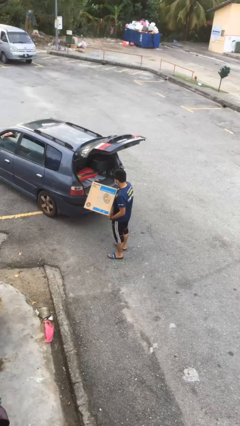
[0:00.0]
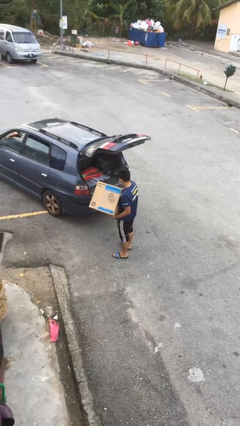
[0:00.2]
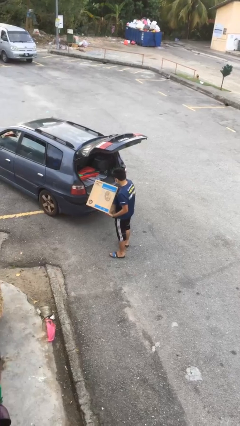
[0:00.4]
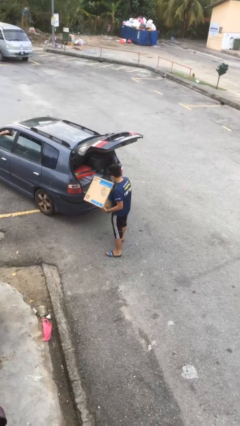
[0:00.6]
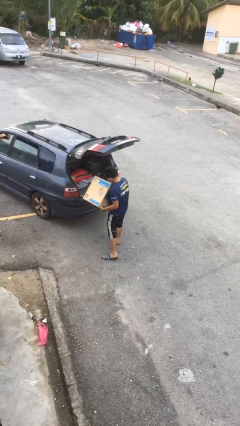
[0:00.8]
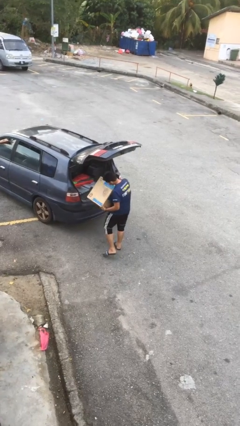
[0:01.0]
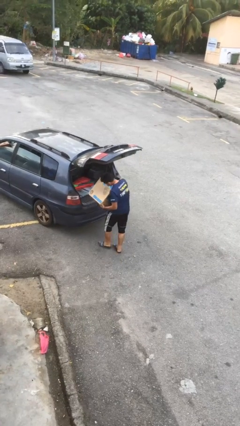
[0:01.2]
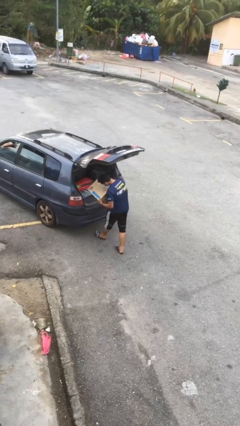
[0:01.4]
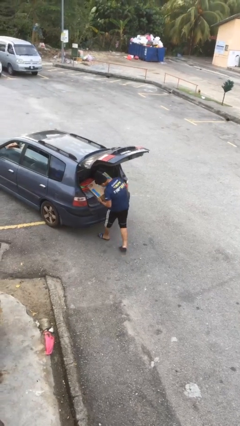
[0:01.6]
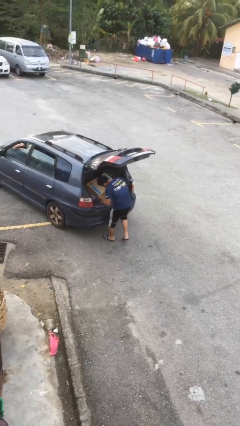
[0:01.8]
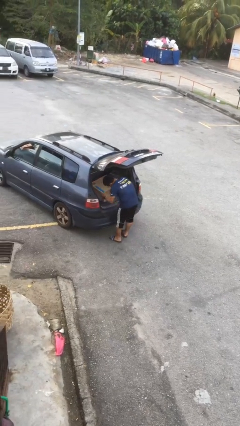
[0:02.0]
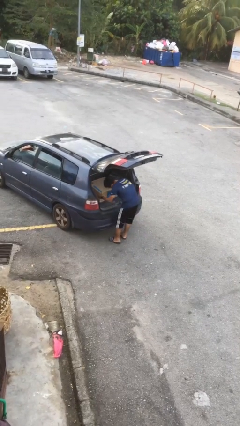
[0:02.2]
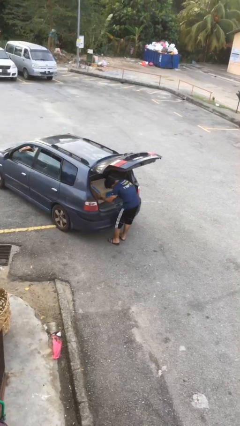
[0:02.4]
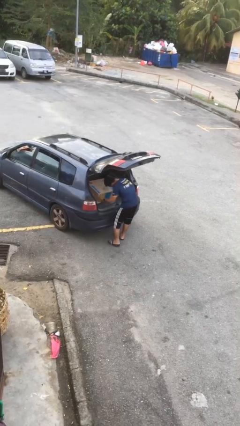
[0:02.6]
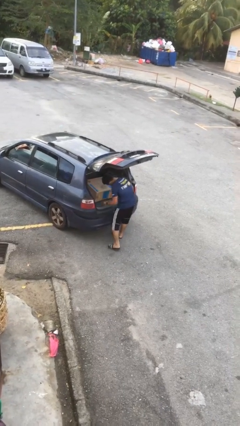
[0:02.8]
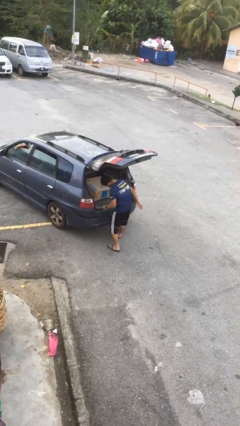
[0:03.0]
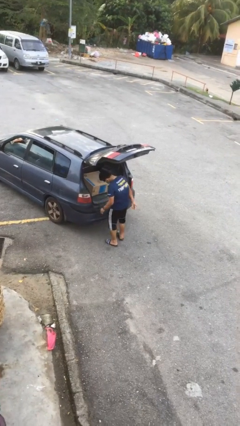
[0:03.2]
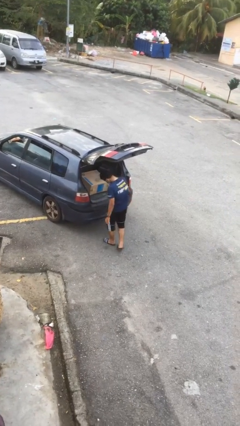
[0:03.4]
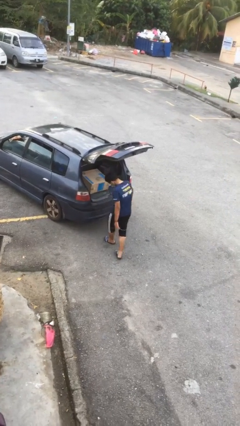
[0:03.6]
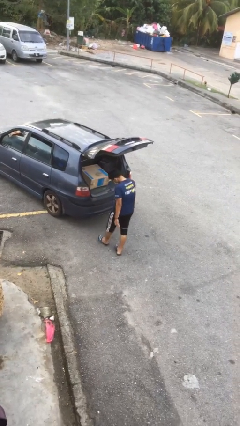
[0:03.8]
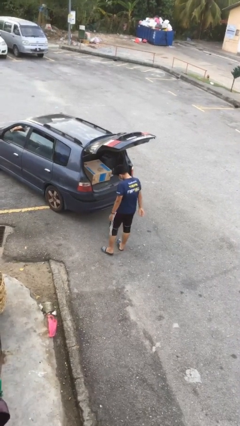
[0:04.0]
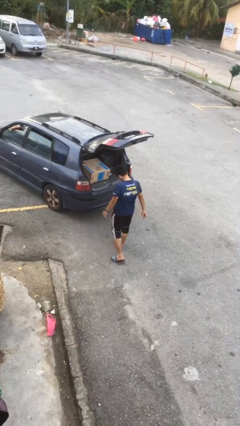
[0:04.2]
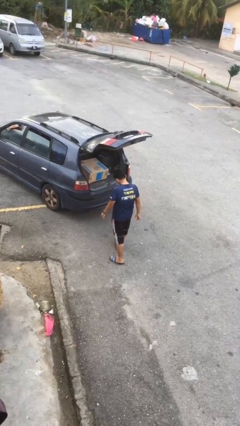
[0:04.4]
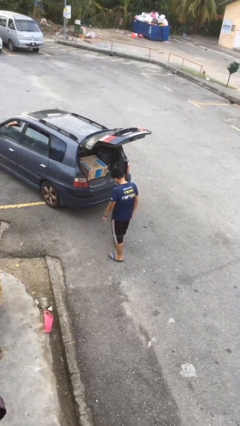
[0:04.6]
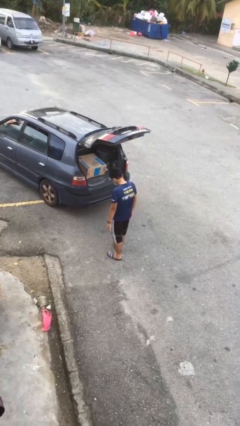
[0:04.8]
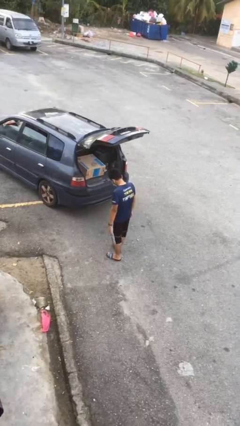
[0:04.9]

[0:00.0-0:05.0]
person loads car

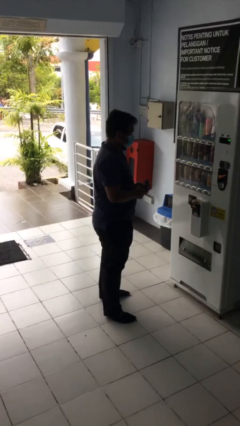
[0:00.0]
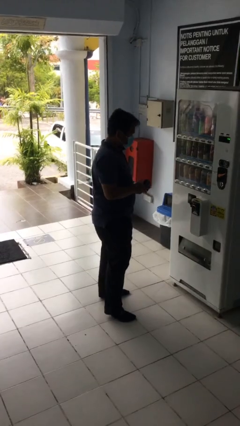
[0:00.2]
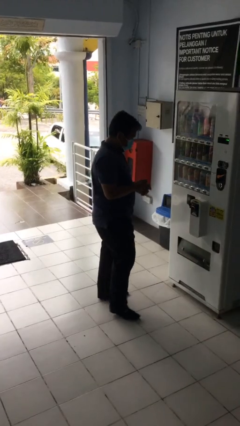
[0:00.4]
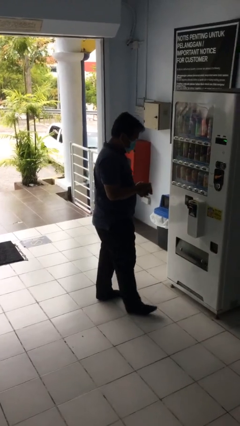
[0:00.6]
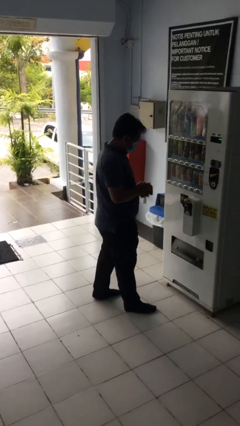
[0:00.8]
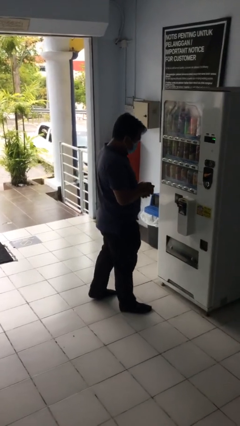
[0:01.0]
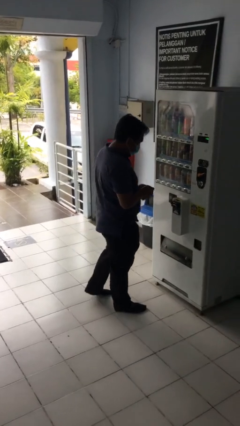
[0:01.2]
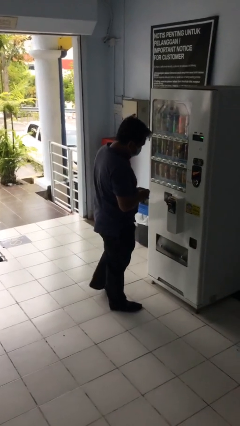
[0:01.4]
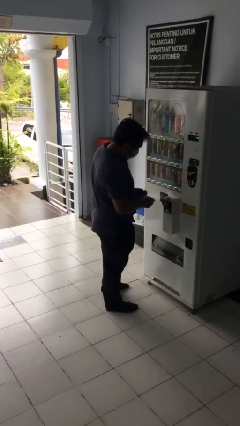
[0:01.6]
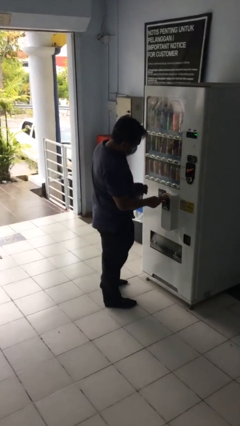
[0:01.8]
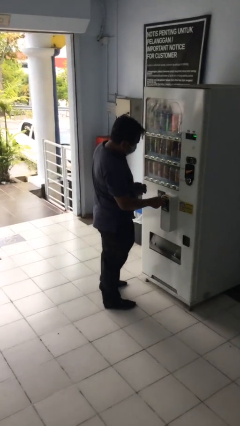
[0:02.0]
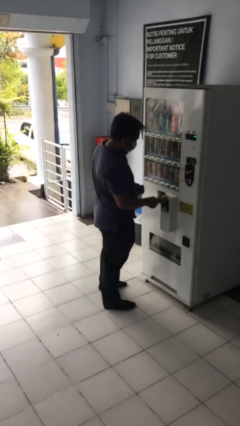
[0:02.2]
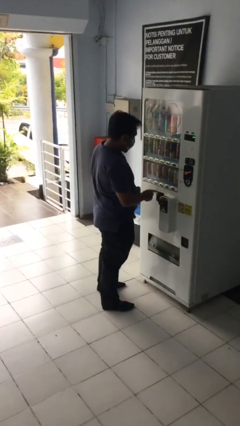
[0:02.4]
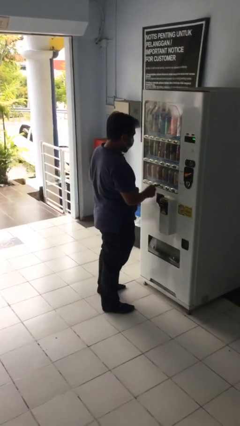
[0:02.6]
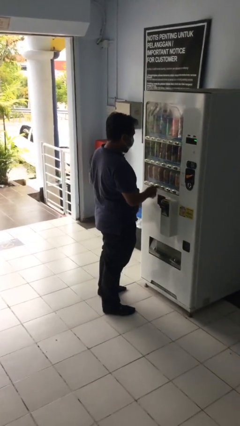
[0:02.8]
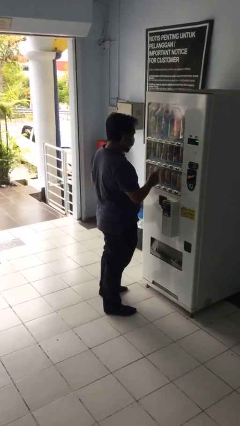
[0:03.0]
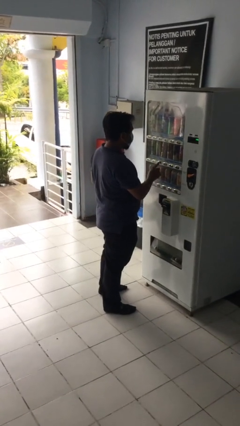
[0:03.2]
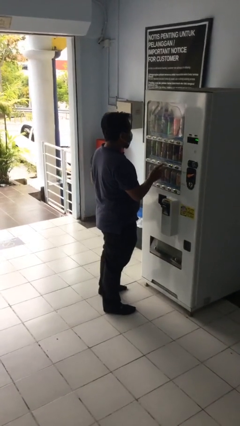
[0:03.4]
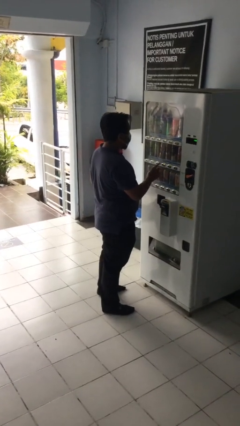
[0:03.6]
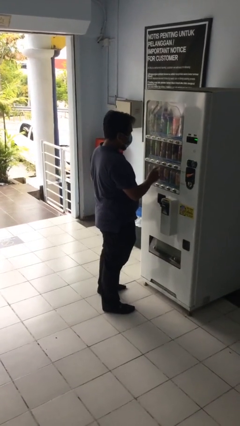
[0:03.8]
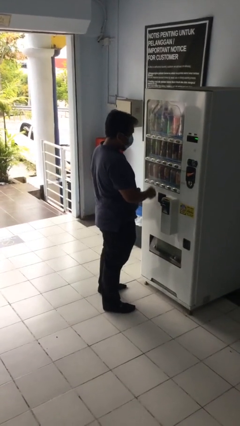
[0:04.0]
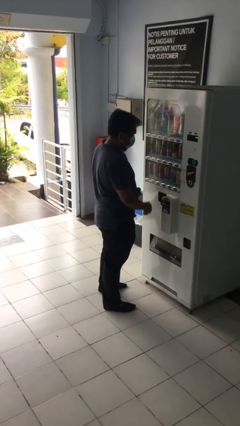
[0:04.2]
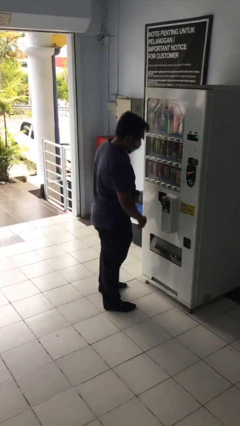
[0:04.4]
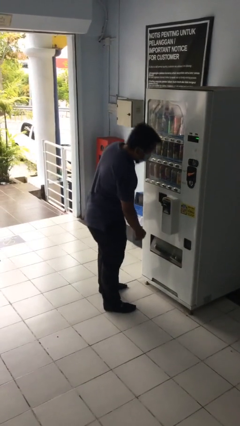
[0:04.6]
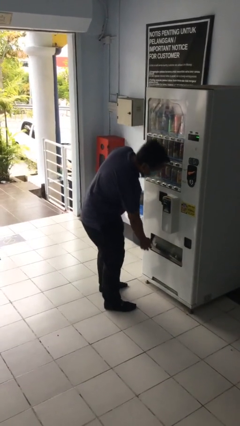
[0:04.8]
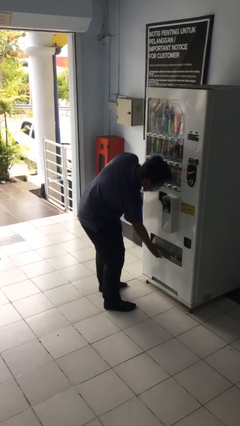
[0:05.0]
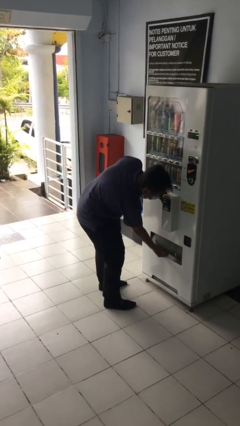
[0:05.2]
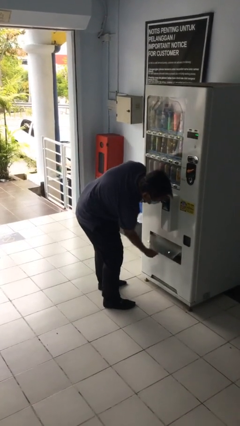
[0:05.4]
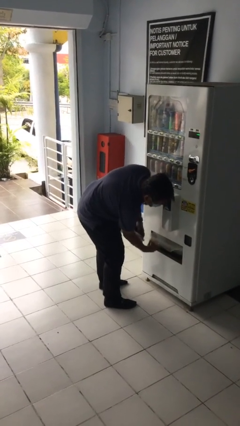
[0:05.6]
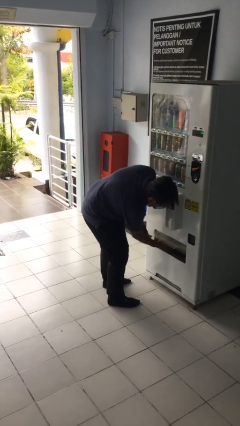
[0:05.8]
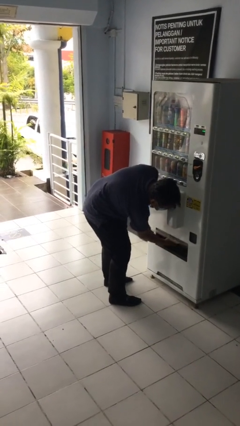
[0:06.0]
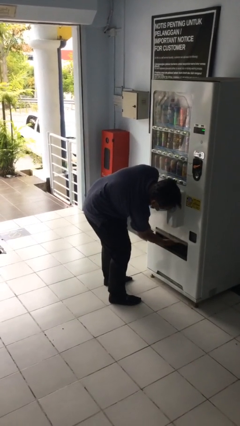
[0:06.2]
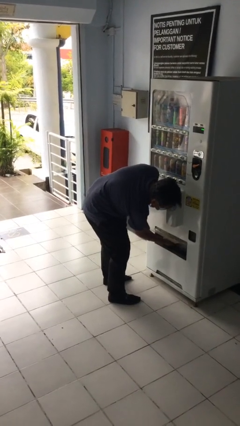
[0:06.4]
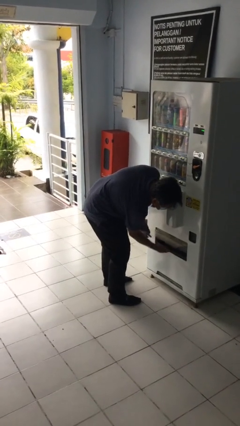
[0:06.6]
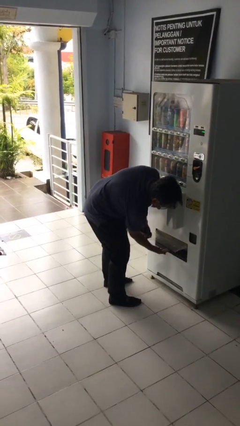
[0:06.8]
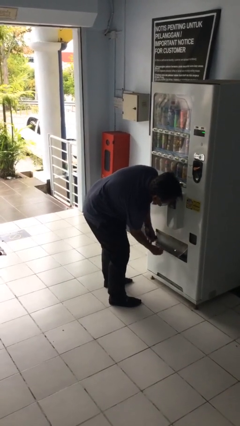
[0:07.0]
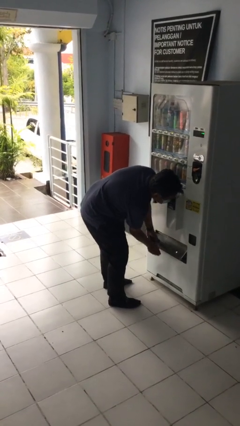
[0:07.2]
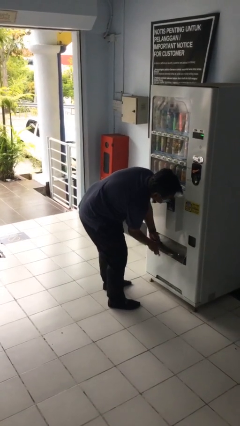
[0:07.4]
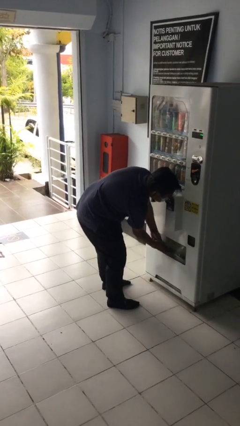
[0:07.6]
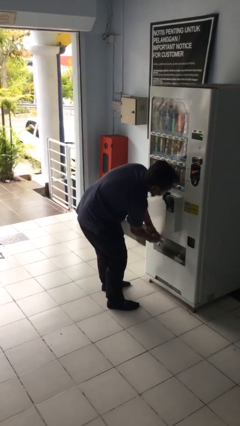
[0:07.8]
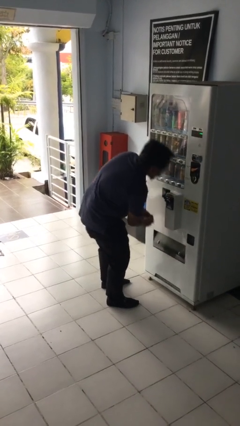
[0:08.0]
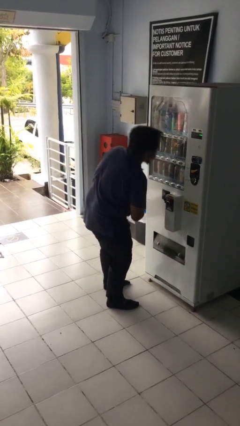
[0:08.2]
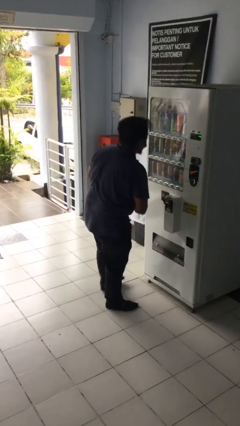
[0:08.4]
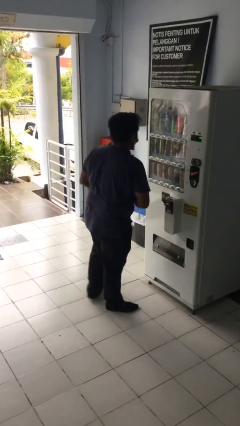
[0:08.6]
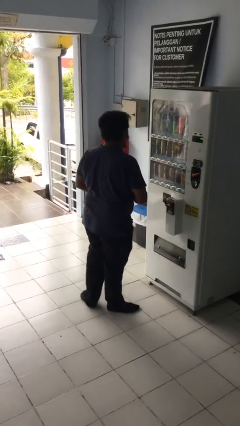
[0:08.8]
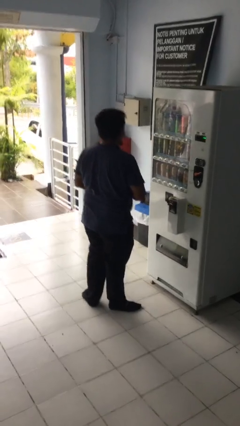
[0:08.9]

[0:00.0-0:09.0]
person purchases from machine

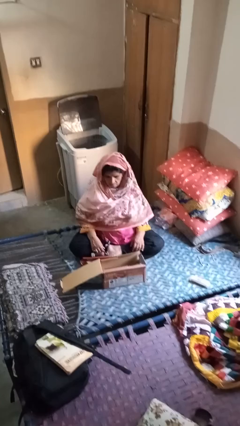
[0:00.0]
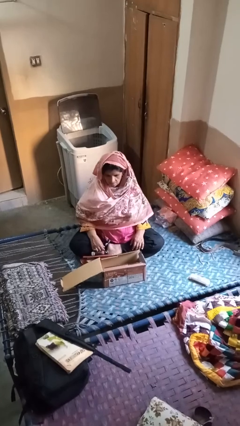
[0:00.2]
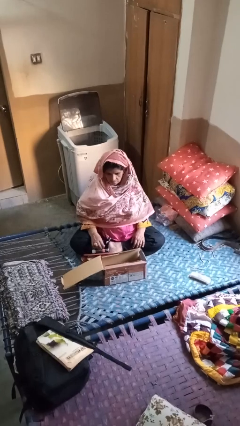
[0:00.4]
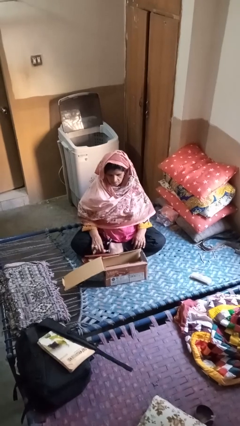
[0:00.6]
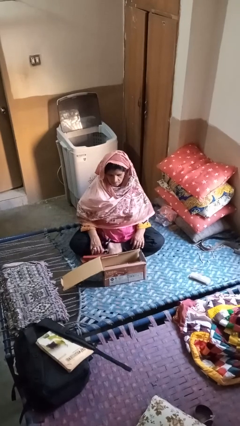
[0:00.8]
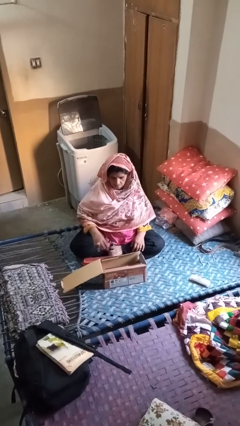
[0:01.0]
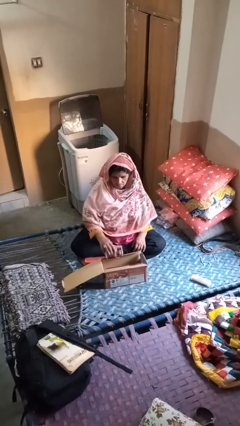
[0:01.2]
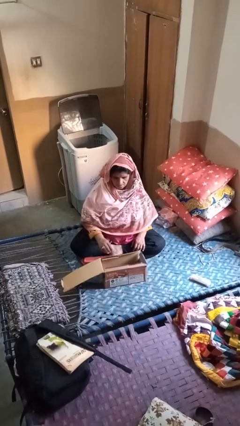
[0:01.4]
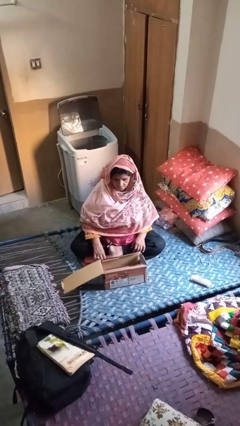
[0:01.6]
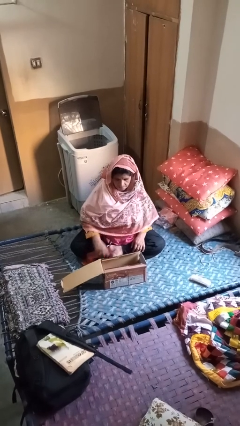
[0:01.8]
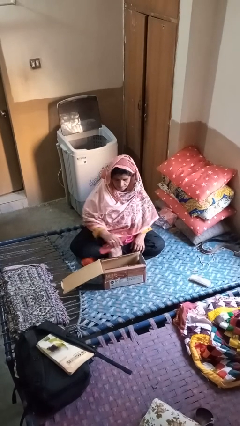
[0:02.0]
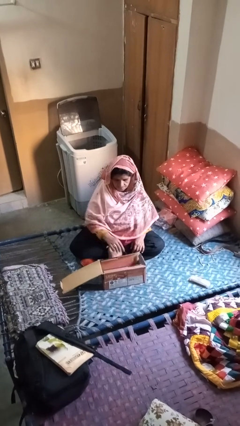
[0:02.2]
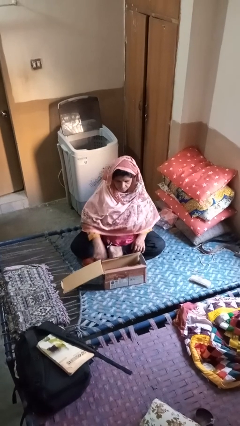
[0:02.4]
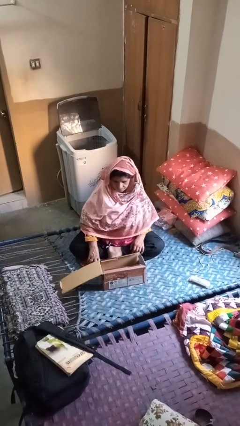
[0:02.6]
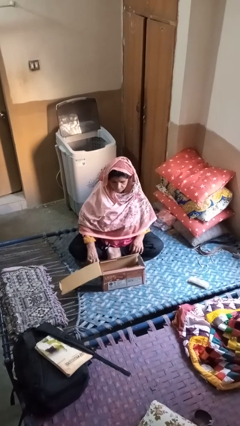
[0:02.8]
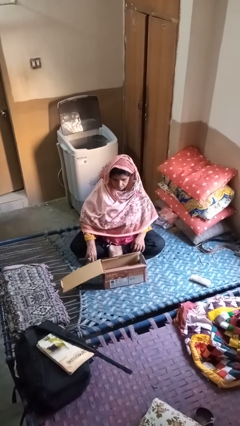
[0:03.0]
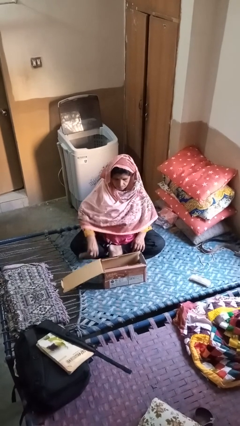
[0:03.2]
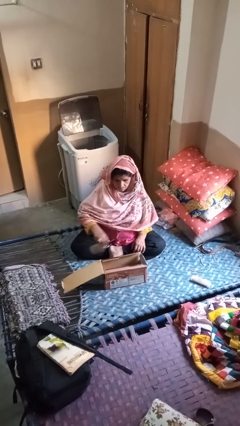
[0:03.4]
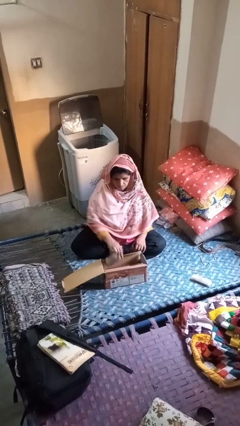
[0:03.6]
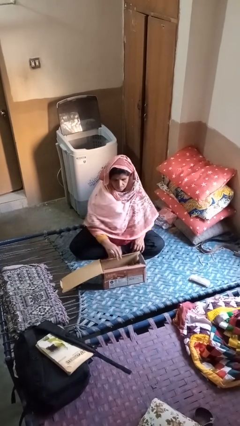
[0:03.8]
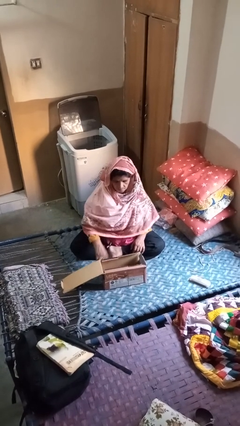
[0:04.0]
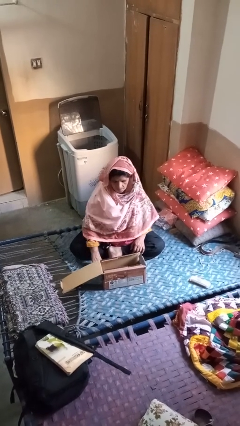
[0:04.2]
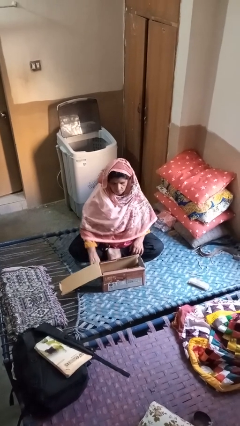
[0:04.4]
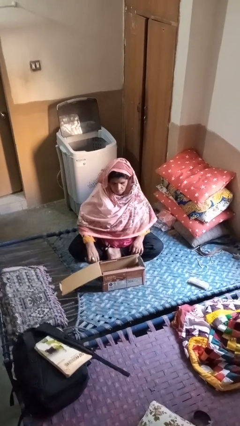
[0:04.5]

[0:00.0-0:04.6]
person puts object into box
